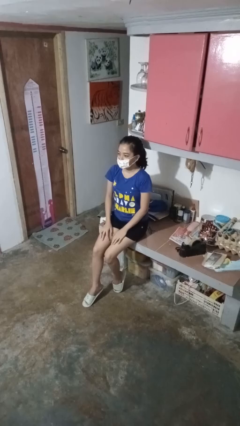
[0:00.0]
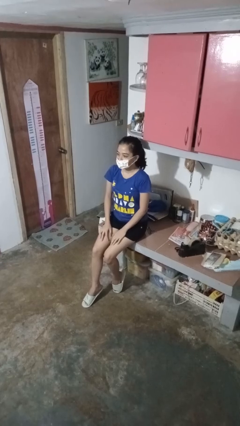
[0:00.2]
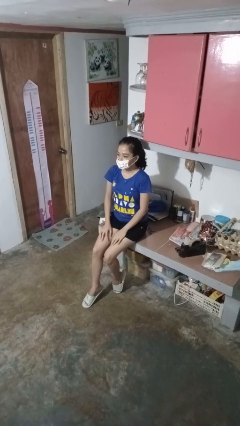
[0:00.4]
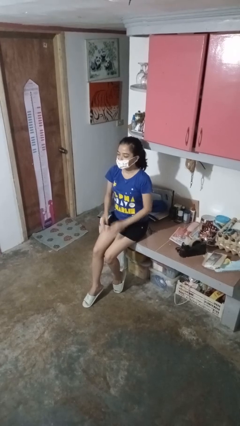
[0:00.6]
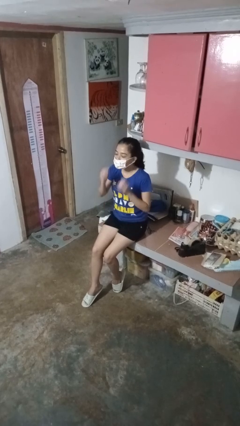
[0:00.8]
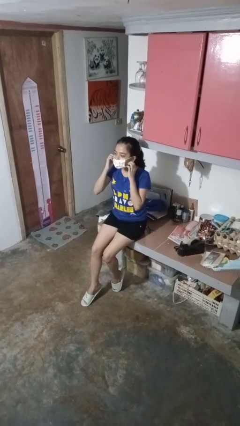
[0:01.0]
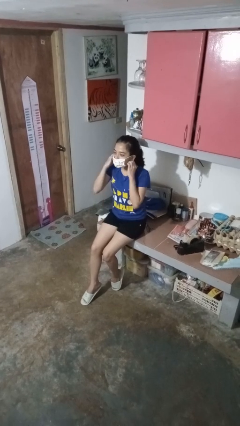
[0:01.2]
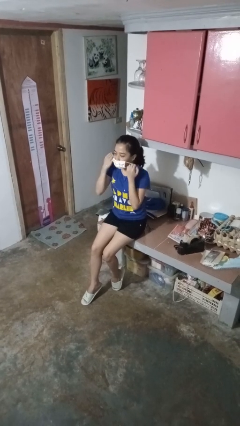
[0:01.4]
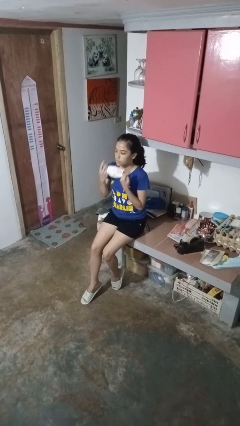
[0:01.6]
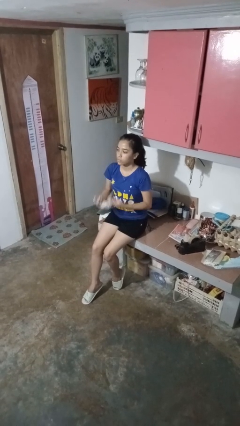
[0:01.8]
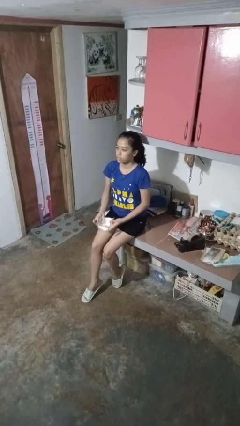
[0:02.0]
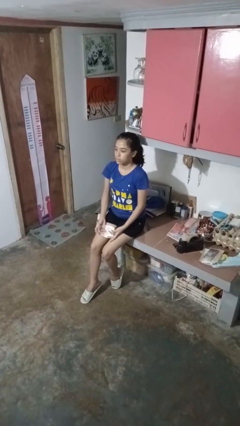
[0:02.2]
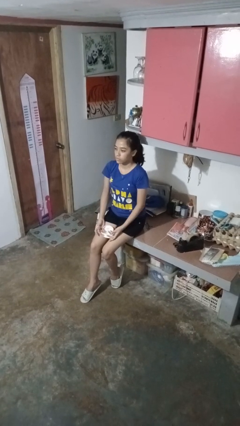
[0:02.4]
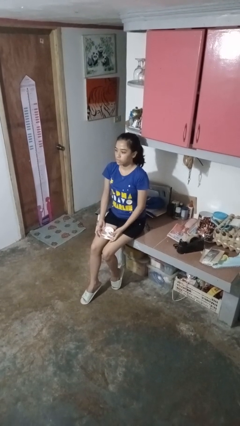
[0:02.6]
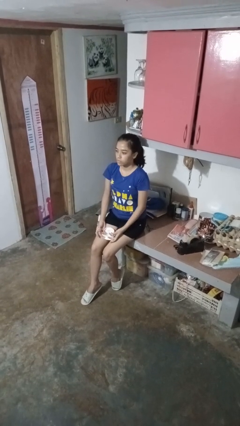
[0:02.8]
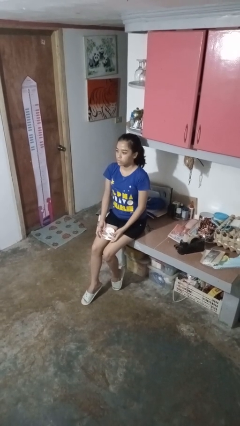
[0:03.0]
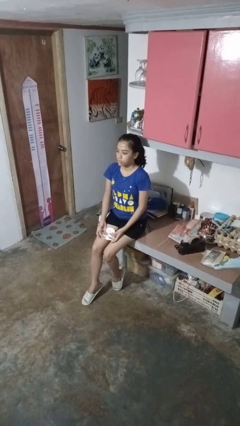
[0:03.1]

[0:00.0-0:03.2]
person takes off facemask

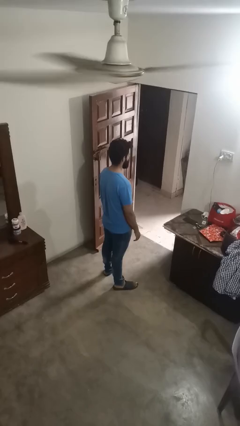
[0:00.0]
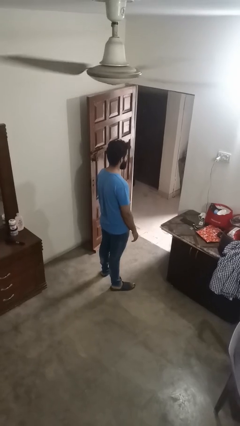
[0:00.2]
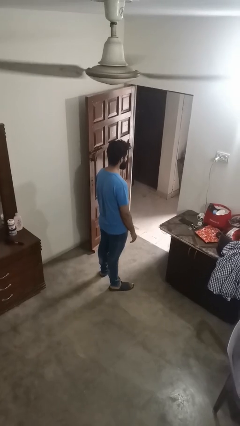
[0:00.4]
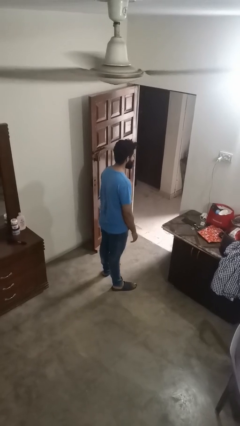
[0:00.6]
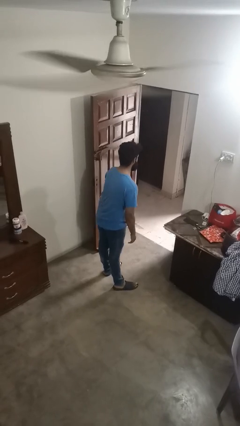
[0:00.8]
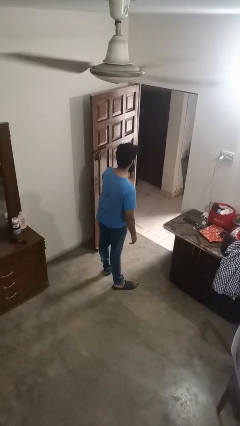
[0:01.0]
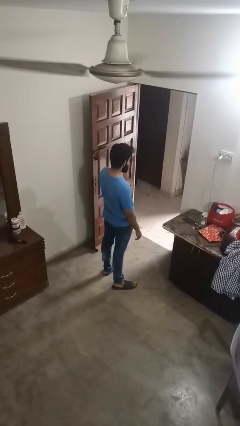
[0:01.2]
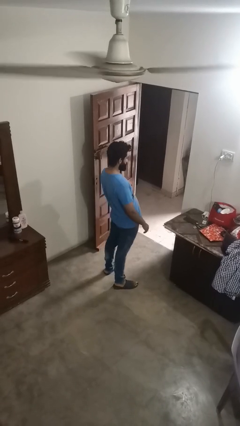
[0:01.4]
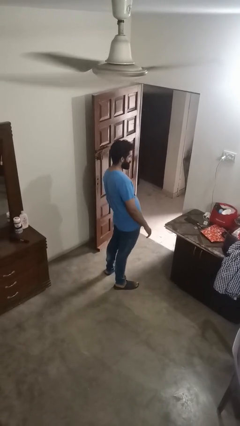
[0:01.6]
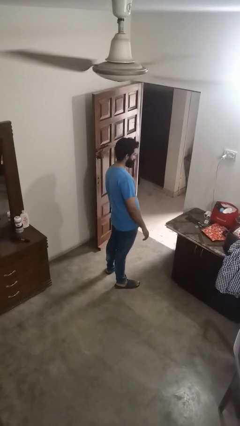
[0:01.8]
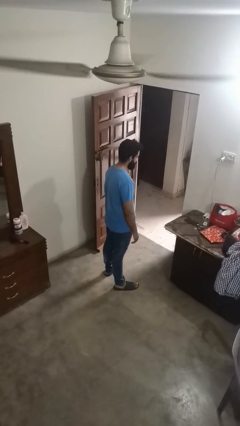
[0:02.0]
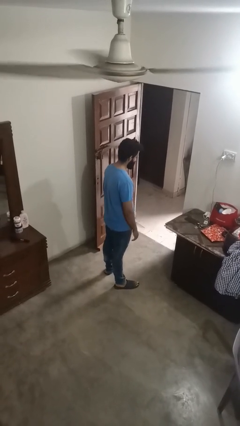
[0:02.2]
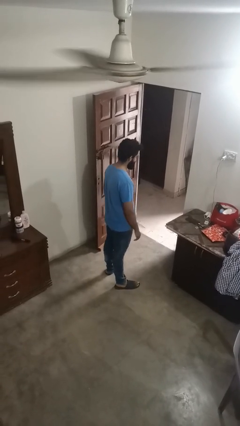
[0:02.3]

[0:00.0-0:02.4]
person wiggles hips

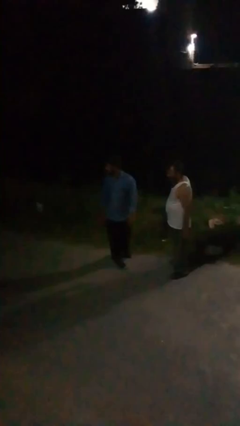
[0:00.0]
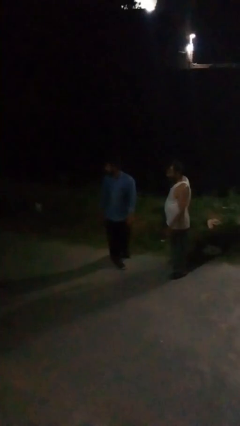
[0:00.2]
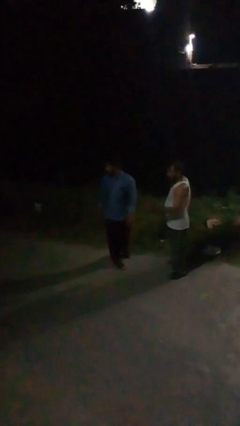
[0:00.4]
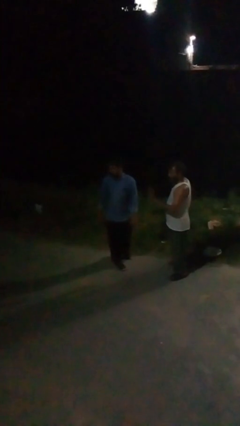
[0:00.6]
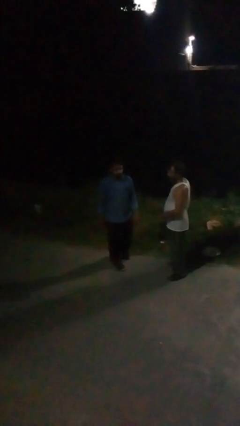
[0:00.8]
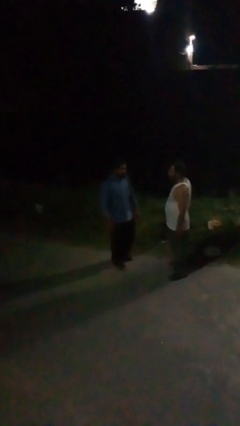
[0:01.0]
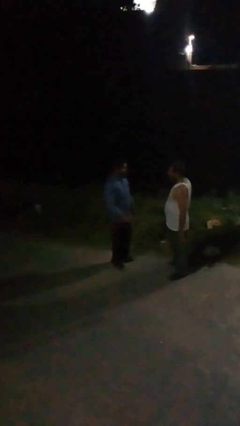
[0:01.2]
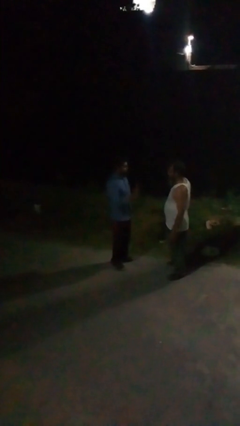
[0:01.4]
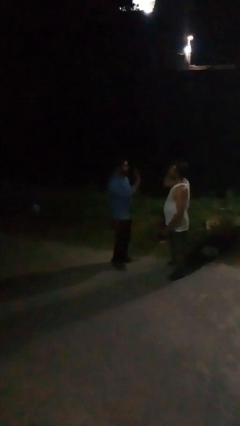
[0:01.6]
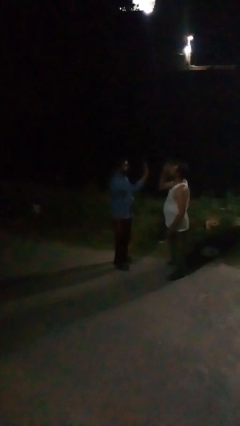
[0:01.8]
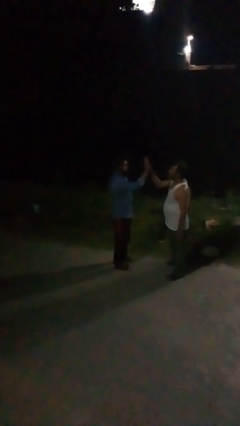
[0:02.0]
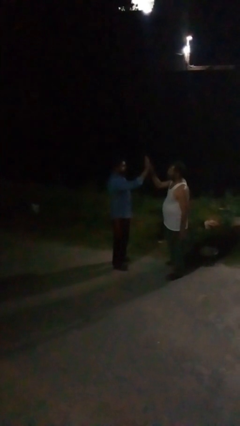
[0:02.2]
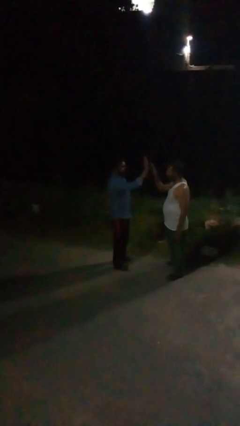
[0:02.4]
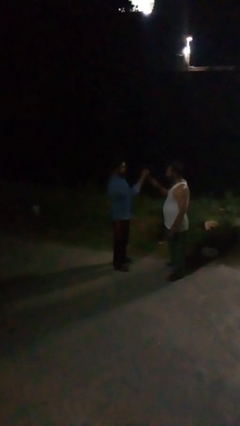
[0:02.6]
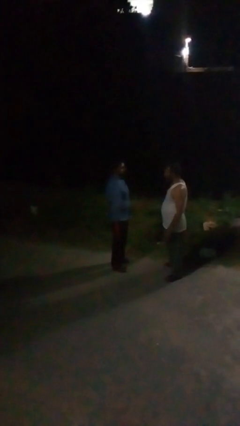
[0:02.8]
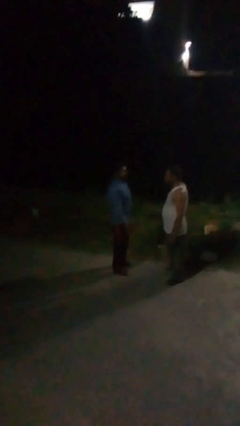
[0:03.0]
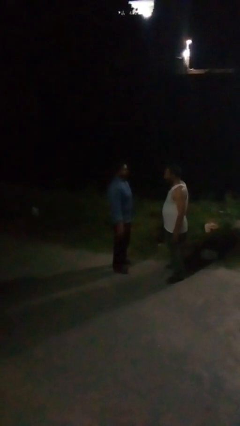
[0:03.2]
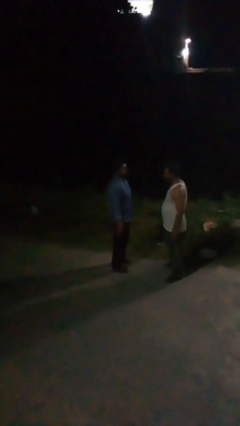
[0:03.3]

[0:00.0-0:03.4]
person highfives hand

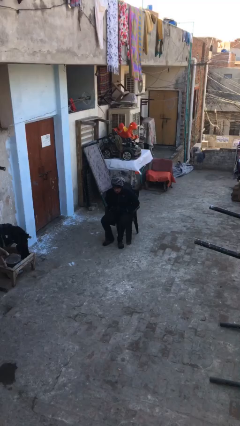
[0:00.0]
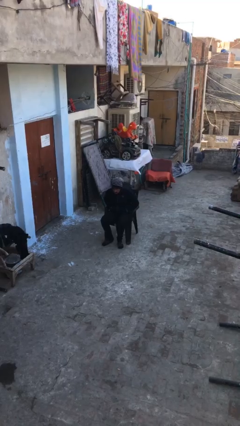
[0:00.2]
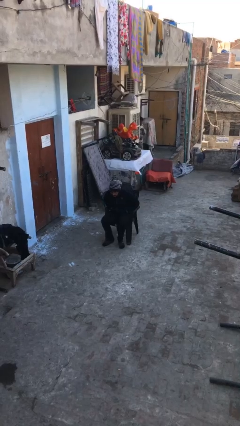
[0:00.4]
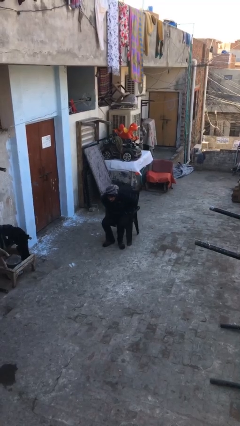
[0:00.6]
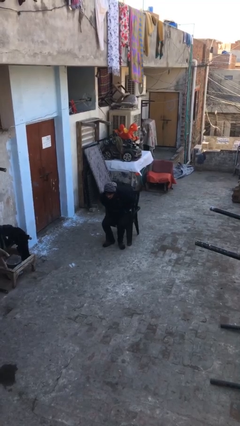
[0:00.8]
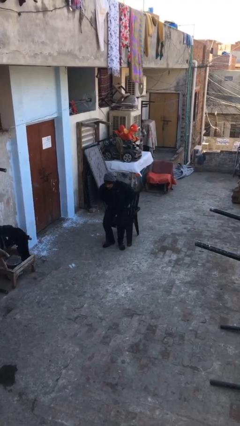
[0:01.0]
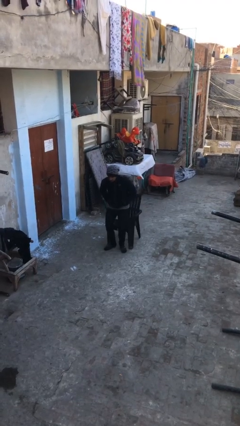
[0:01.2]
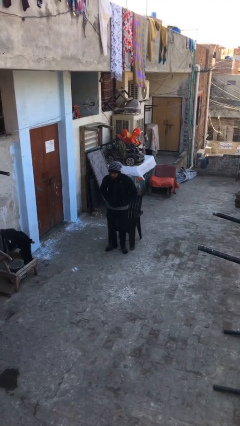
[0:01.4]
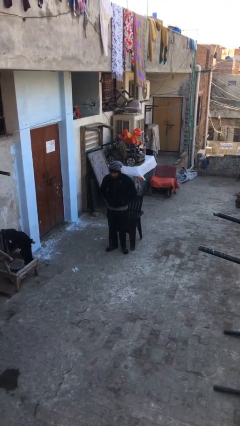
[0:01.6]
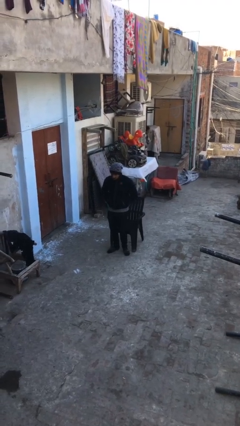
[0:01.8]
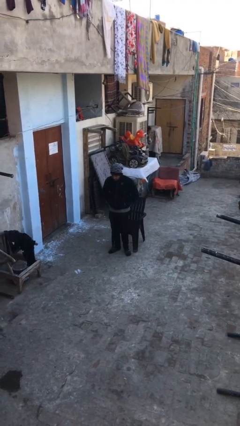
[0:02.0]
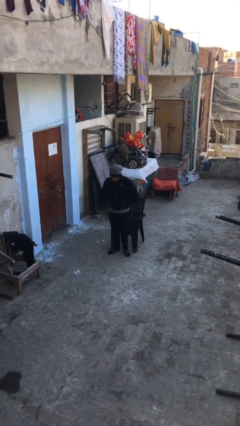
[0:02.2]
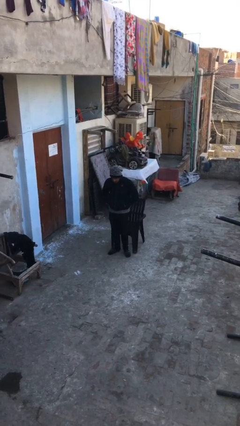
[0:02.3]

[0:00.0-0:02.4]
person stands up

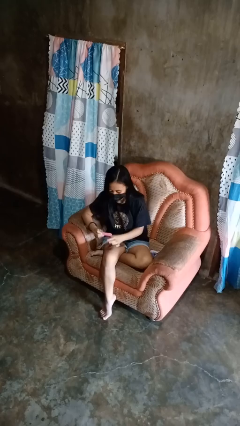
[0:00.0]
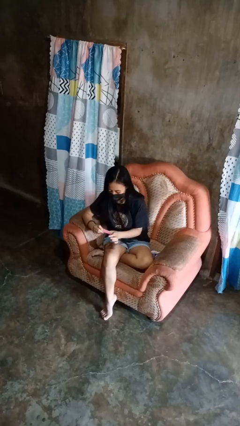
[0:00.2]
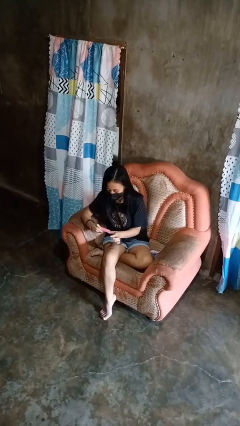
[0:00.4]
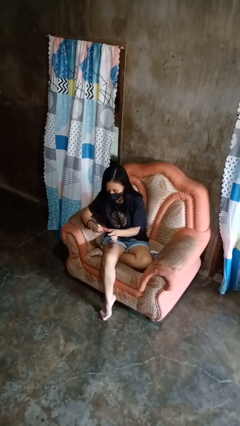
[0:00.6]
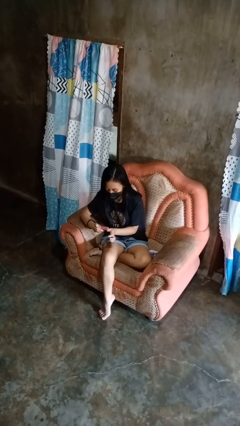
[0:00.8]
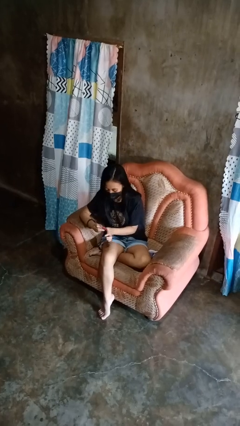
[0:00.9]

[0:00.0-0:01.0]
person files fingernails

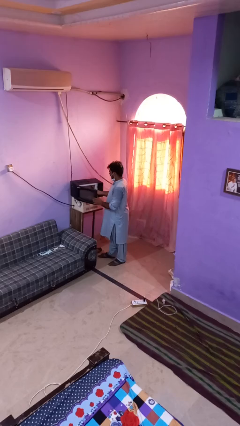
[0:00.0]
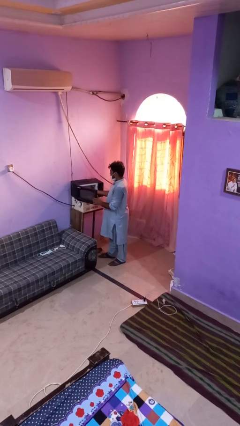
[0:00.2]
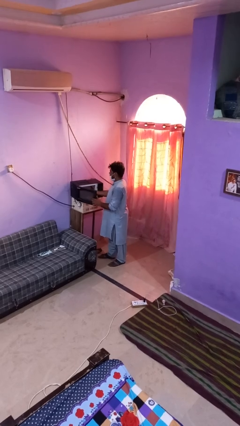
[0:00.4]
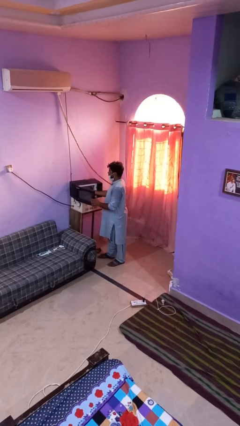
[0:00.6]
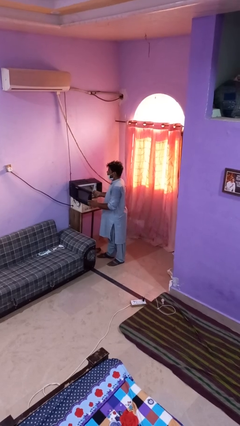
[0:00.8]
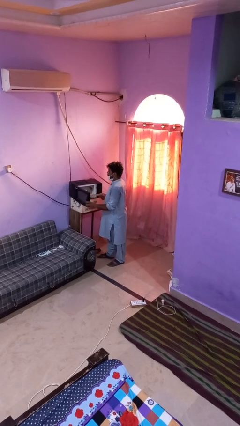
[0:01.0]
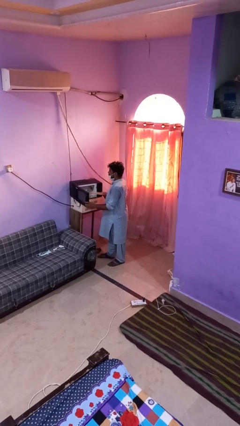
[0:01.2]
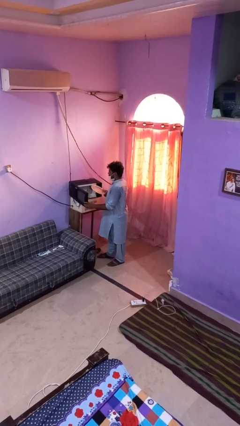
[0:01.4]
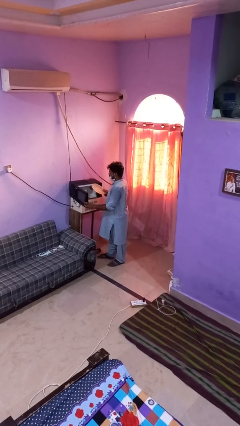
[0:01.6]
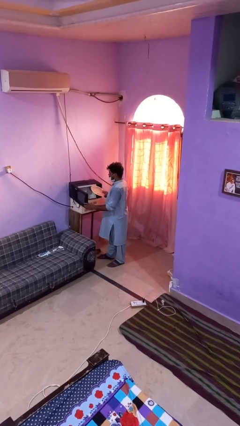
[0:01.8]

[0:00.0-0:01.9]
person takes object from oven

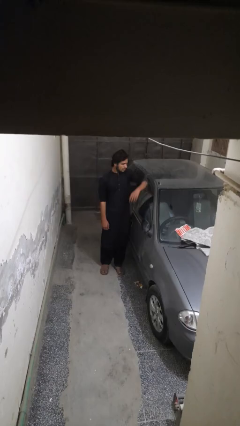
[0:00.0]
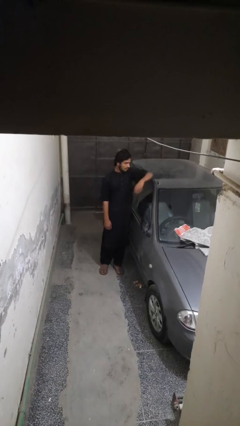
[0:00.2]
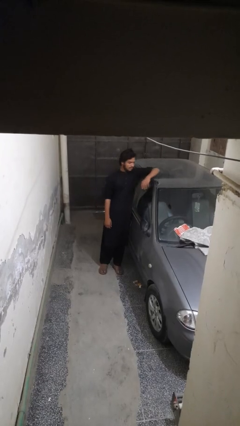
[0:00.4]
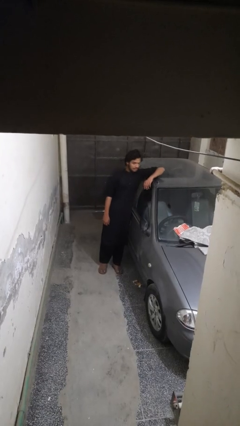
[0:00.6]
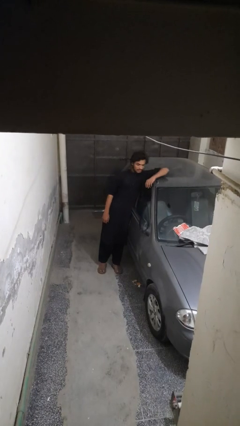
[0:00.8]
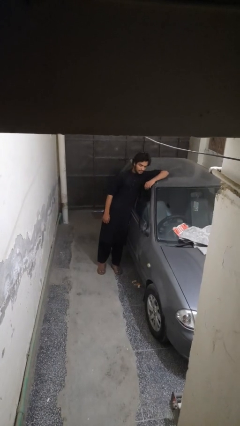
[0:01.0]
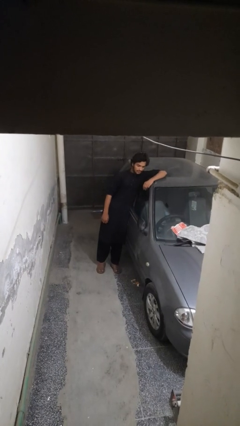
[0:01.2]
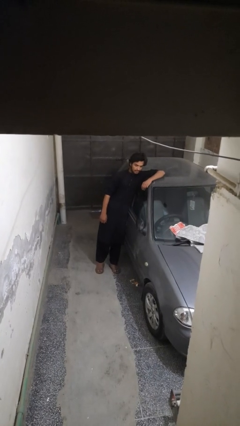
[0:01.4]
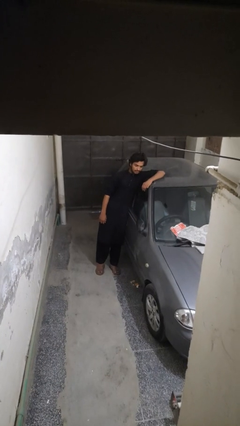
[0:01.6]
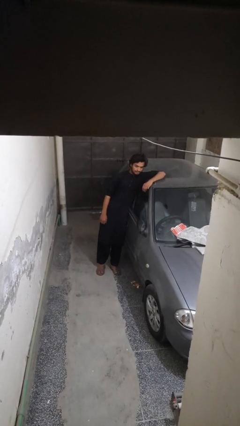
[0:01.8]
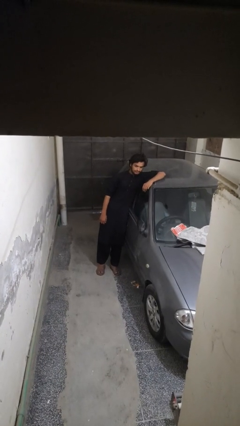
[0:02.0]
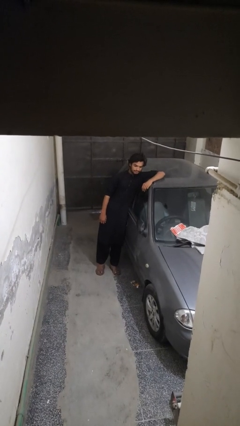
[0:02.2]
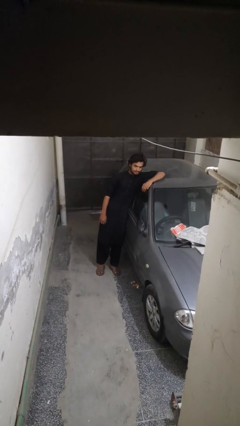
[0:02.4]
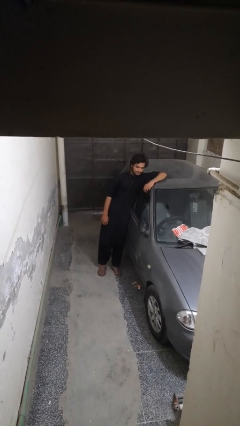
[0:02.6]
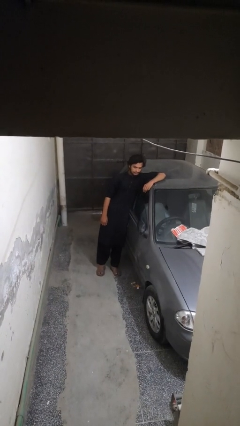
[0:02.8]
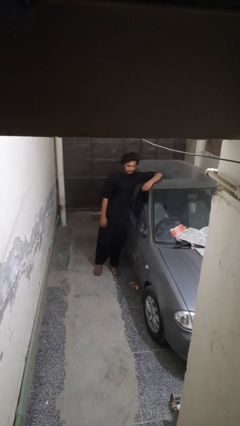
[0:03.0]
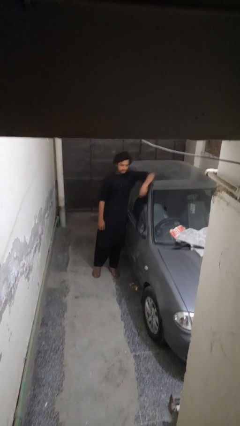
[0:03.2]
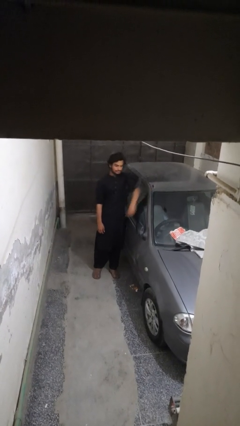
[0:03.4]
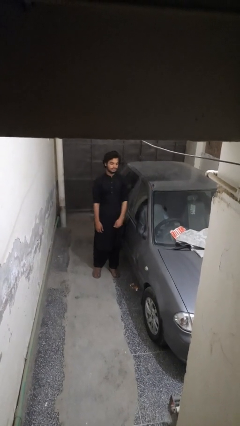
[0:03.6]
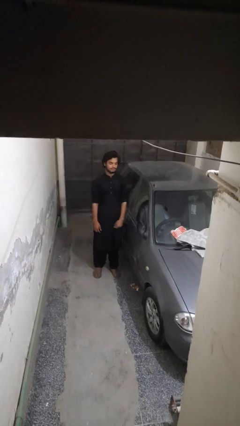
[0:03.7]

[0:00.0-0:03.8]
person leans against car
